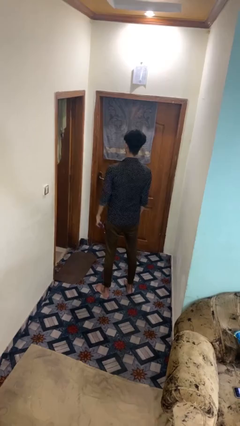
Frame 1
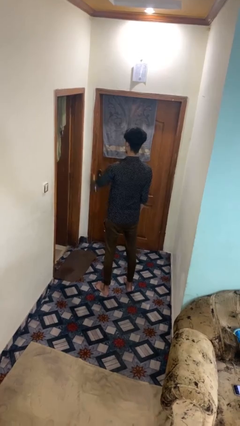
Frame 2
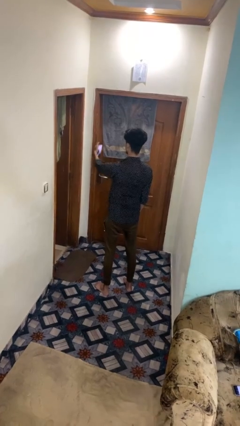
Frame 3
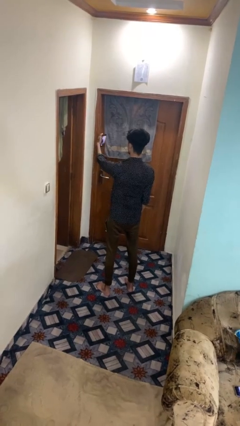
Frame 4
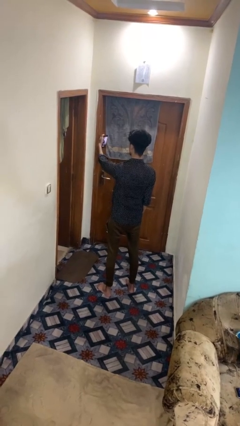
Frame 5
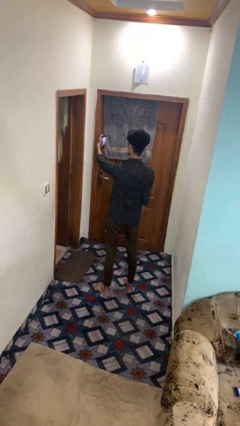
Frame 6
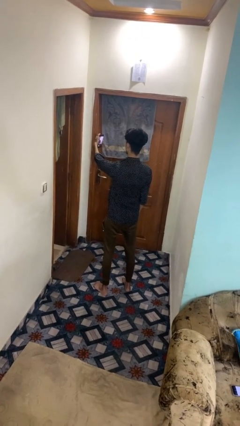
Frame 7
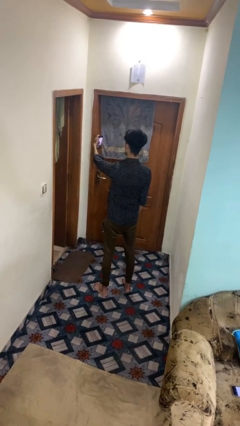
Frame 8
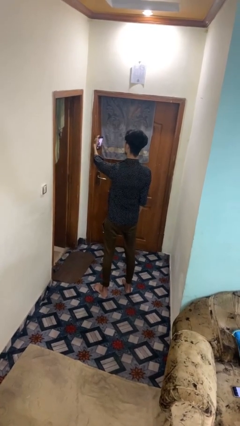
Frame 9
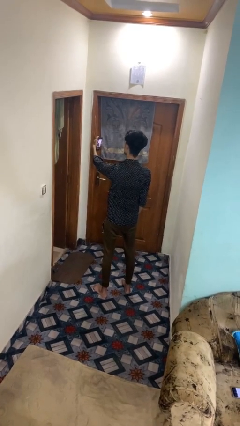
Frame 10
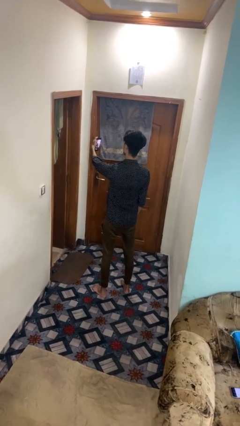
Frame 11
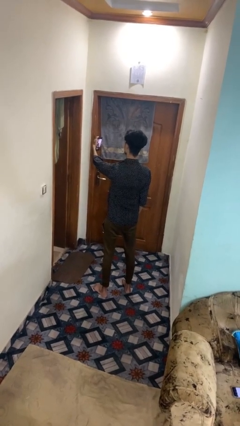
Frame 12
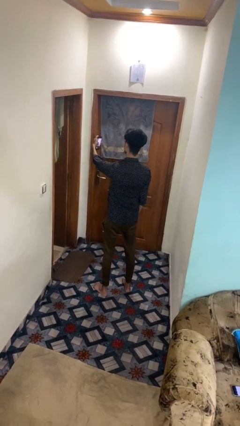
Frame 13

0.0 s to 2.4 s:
person takes selfie

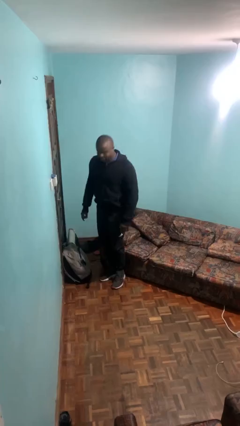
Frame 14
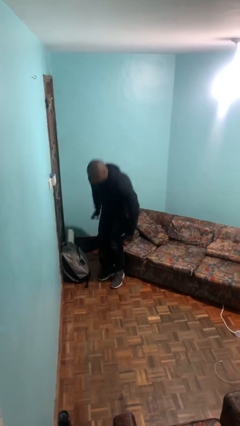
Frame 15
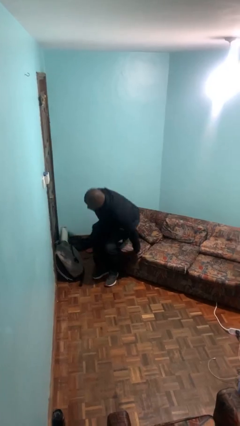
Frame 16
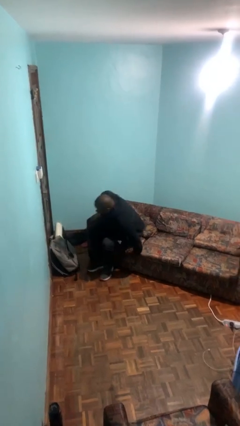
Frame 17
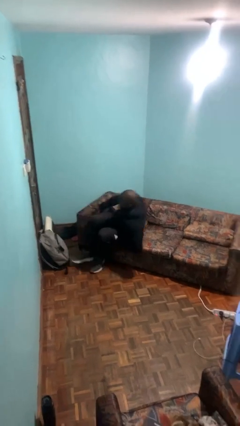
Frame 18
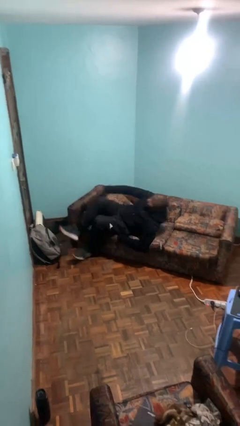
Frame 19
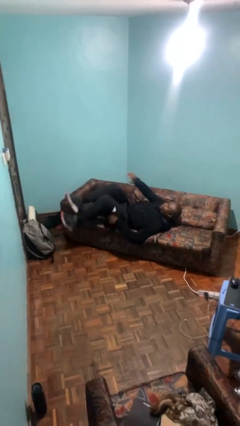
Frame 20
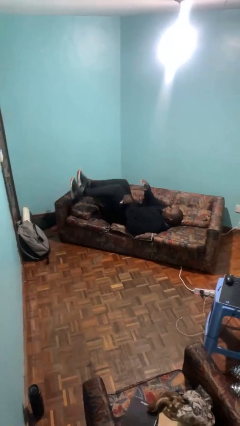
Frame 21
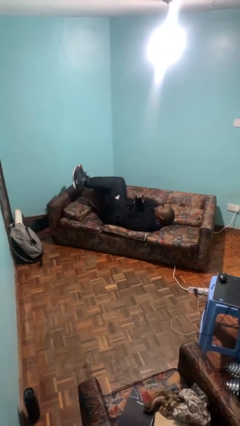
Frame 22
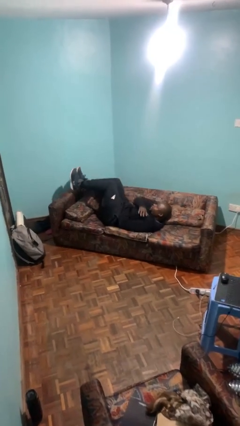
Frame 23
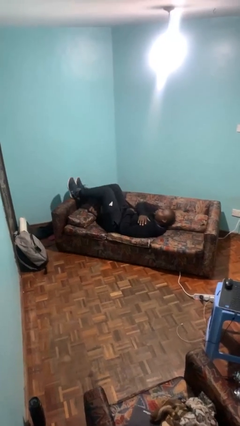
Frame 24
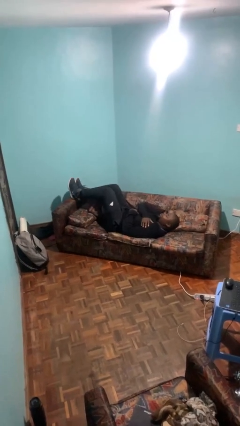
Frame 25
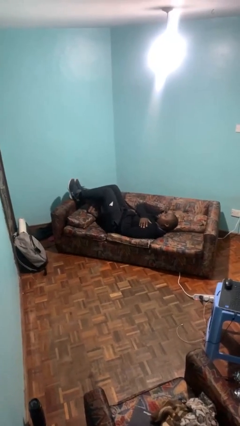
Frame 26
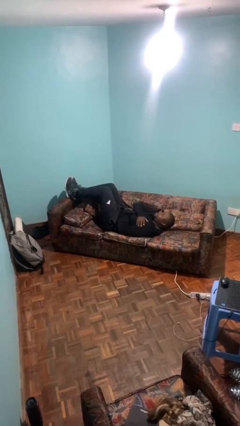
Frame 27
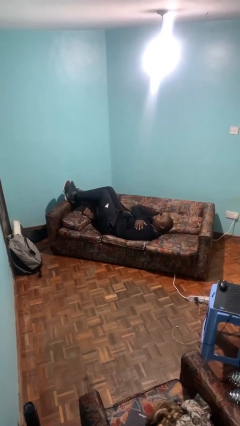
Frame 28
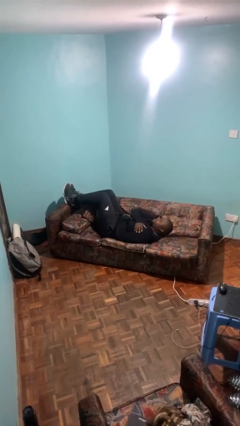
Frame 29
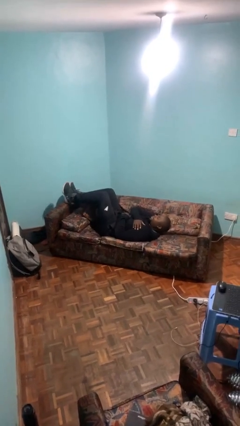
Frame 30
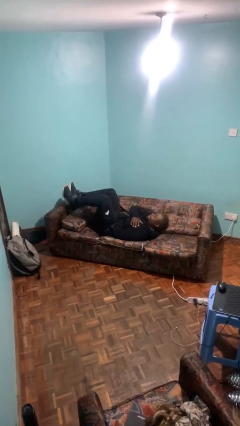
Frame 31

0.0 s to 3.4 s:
person lies down on bed

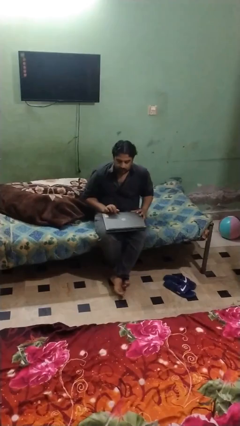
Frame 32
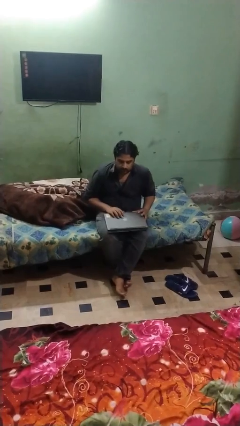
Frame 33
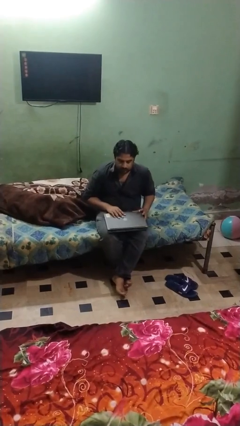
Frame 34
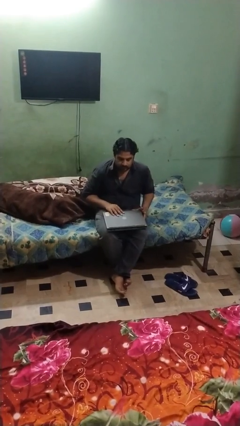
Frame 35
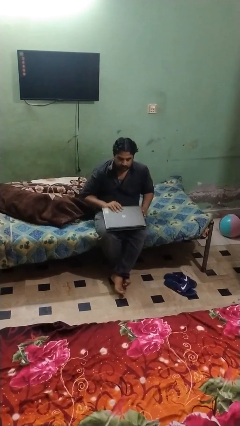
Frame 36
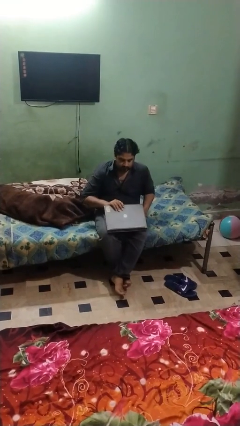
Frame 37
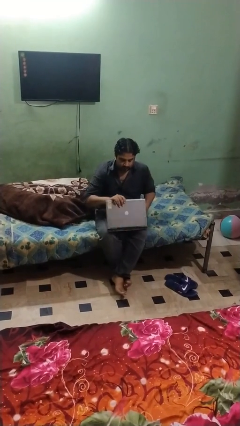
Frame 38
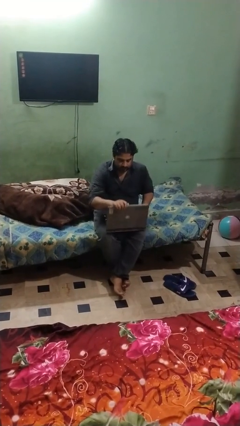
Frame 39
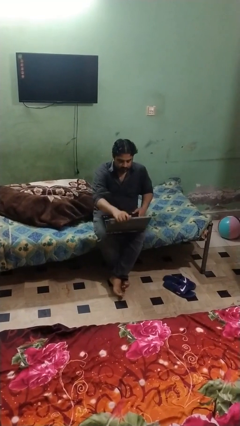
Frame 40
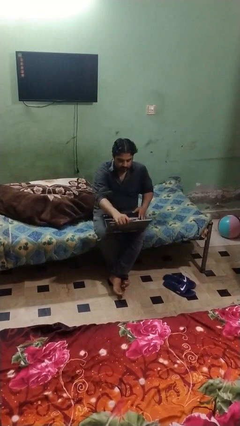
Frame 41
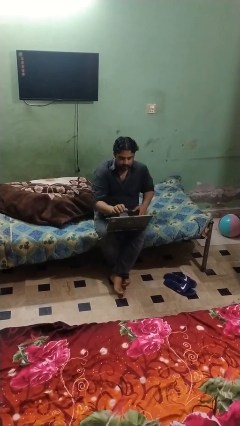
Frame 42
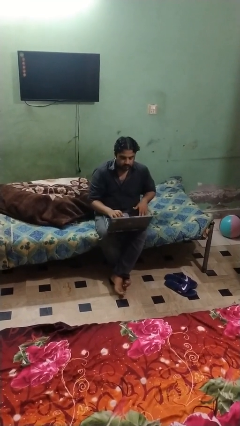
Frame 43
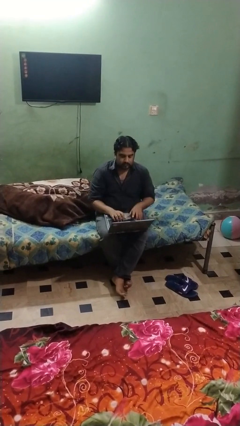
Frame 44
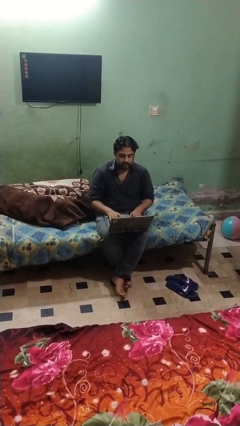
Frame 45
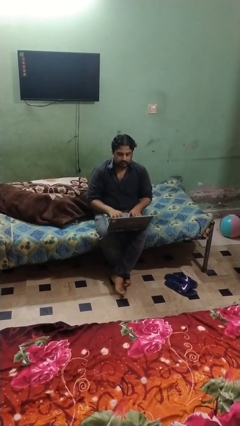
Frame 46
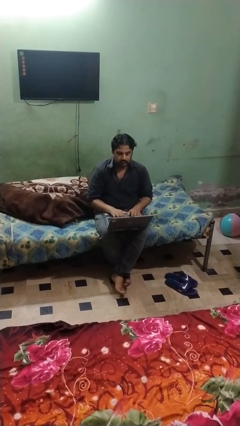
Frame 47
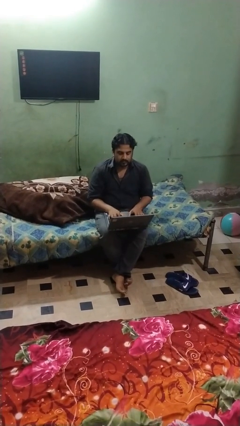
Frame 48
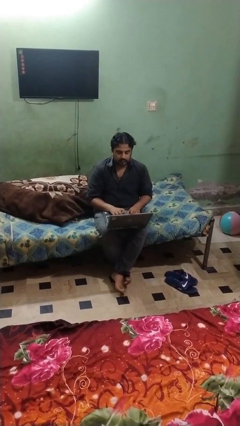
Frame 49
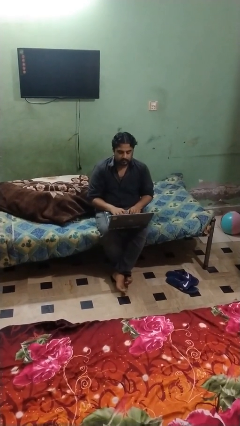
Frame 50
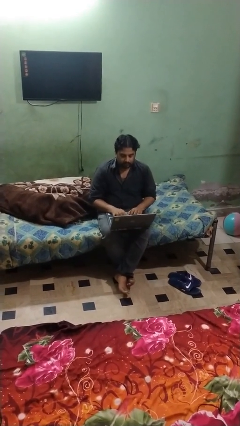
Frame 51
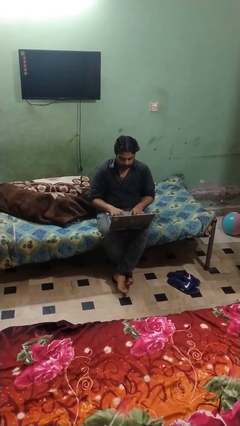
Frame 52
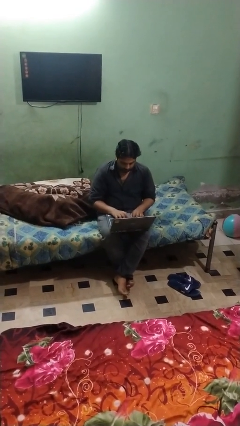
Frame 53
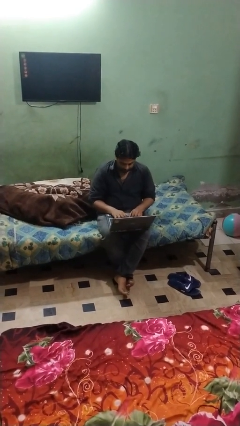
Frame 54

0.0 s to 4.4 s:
person opens laptop

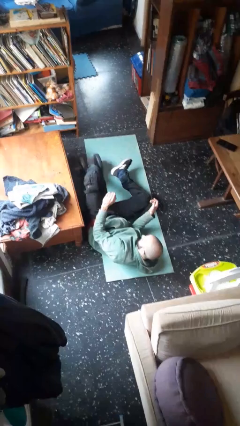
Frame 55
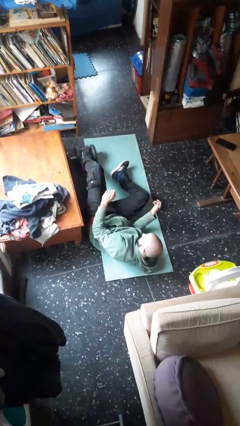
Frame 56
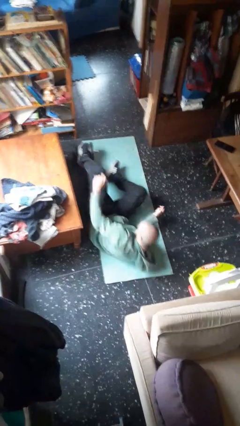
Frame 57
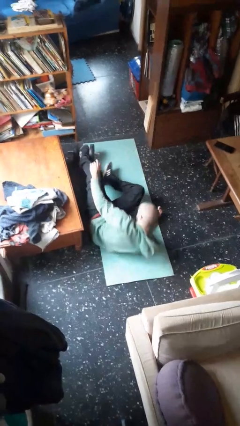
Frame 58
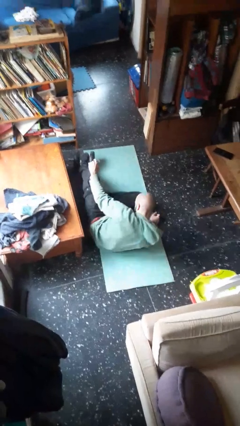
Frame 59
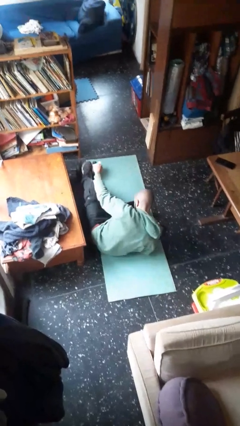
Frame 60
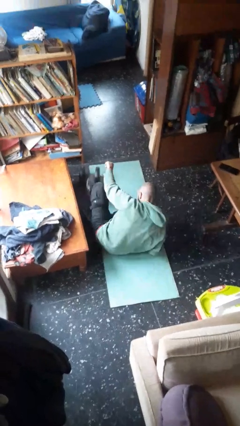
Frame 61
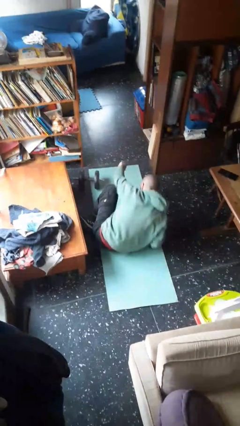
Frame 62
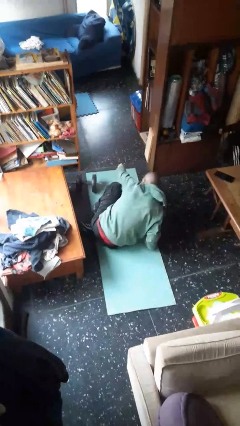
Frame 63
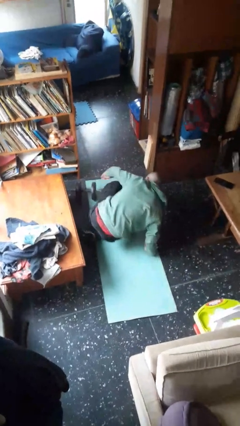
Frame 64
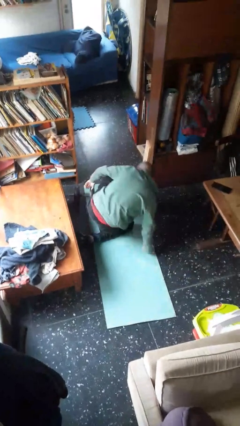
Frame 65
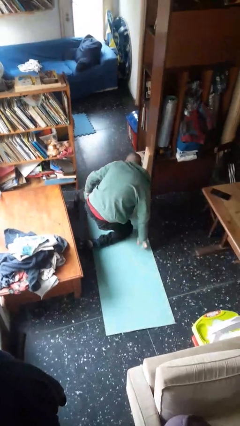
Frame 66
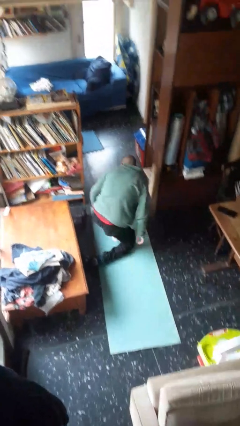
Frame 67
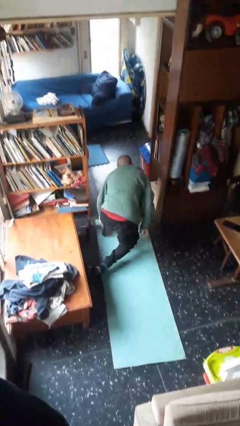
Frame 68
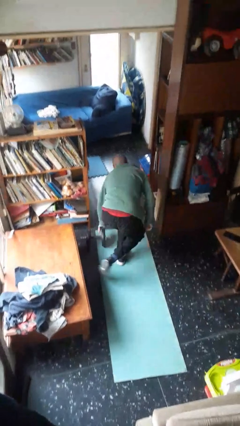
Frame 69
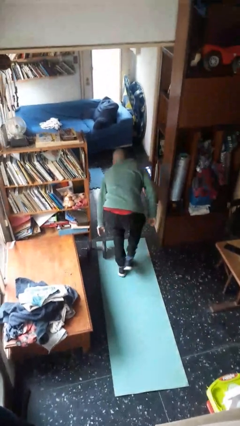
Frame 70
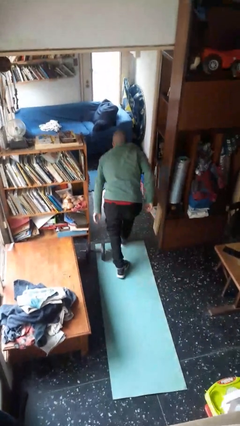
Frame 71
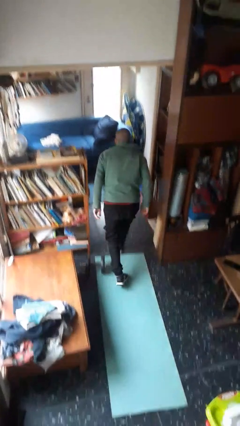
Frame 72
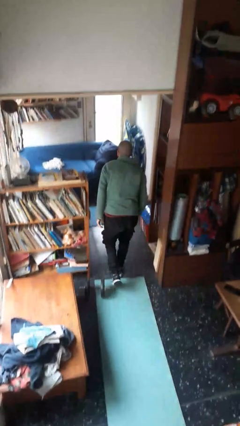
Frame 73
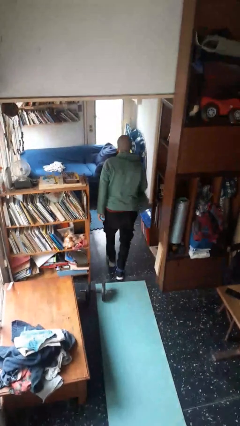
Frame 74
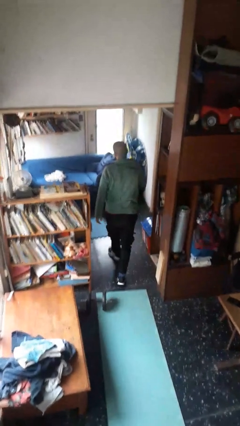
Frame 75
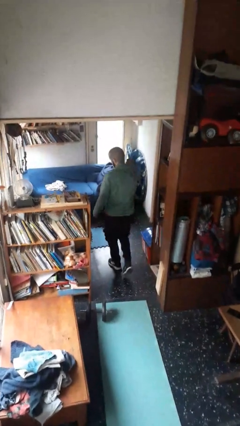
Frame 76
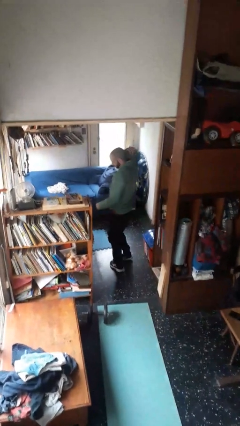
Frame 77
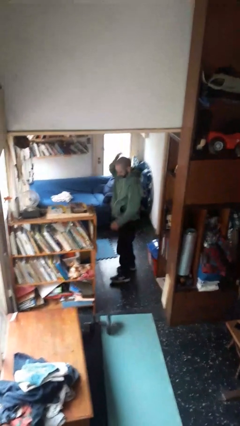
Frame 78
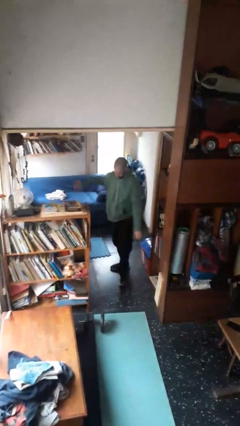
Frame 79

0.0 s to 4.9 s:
person stands up from floor

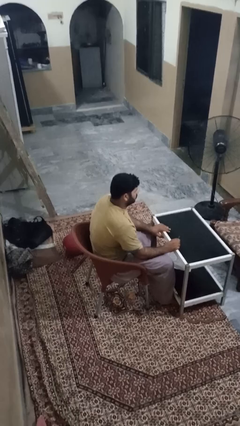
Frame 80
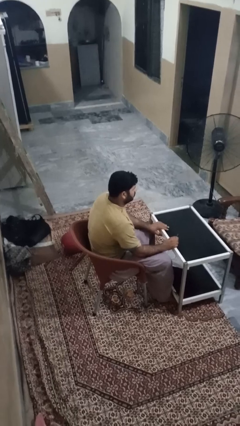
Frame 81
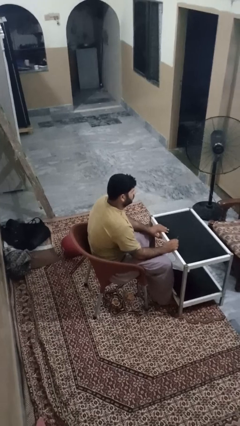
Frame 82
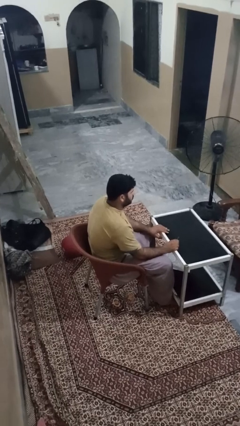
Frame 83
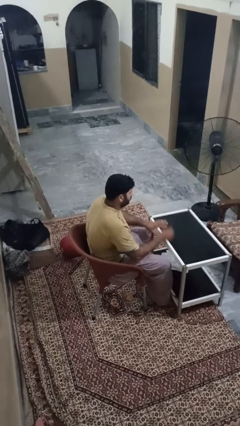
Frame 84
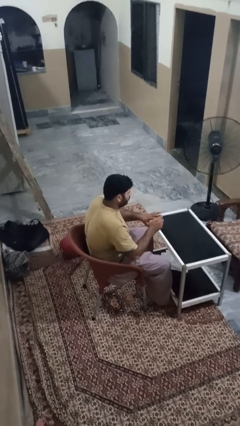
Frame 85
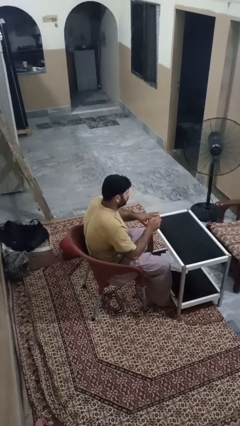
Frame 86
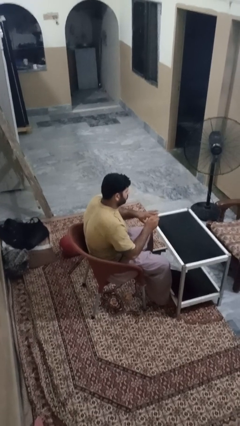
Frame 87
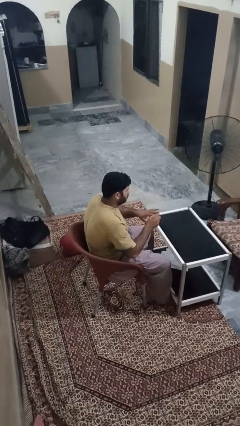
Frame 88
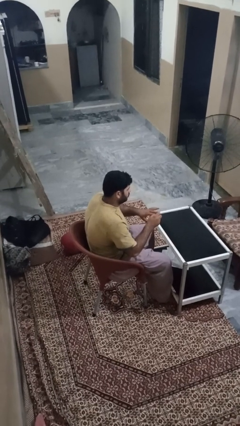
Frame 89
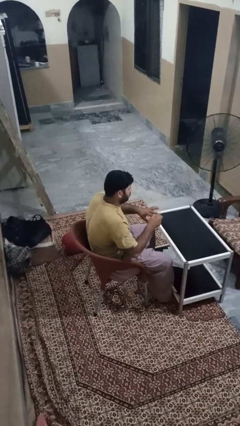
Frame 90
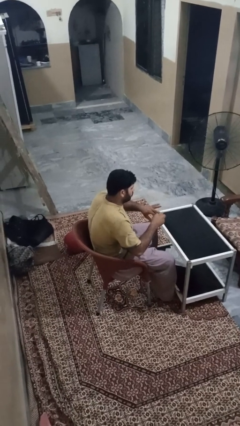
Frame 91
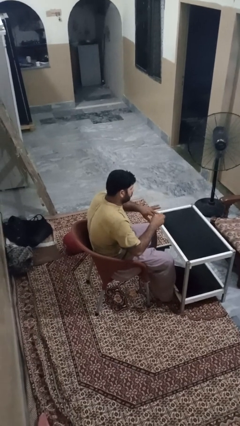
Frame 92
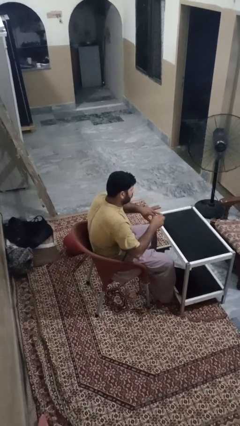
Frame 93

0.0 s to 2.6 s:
person files fingernails
